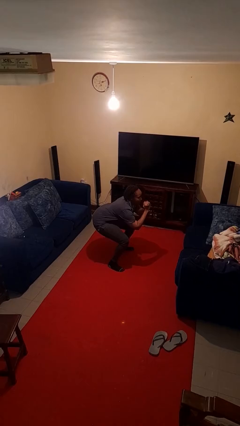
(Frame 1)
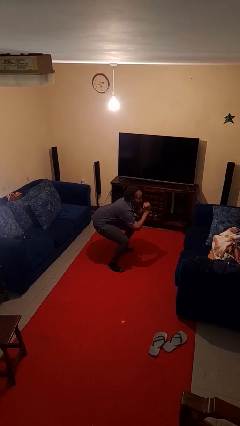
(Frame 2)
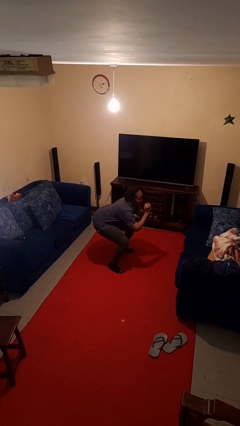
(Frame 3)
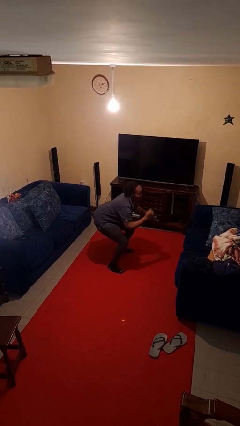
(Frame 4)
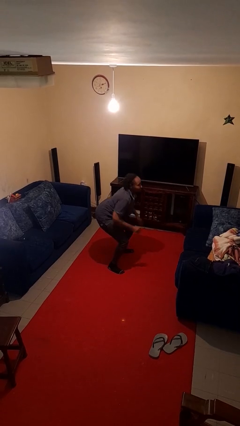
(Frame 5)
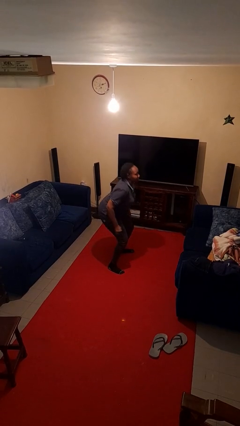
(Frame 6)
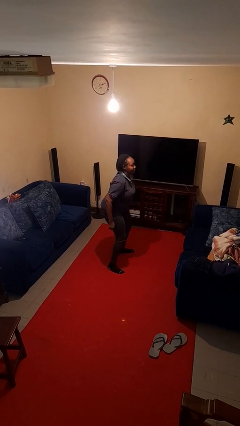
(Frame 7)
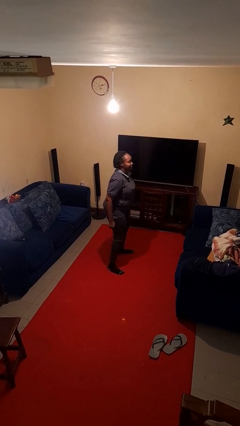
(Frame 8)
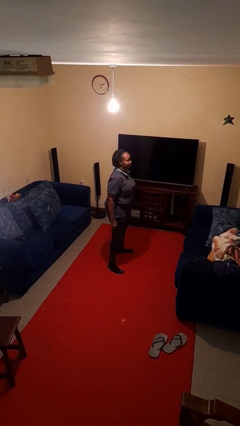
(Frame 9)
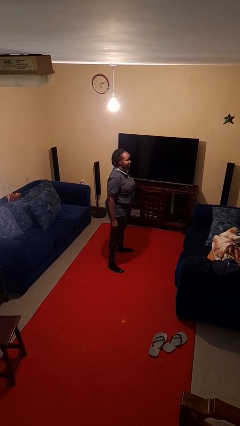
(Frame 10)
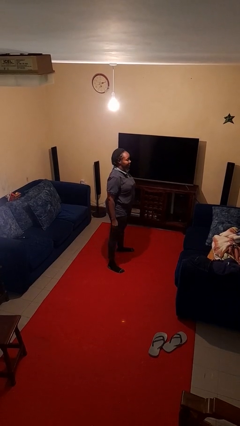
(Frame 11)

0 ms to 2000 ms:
person stands up

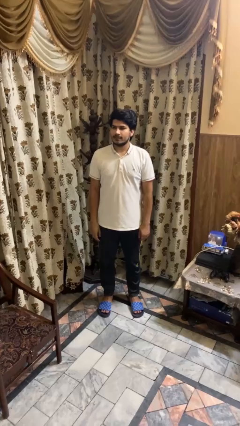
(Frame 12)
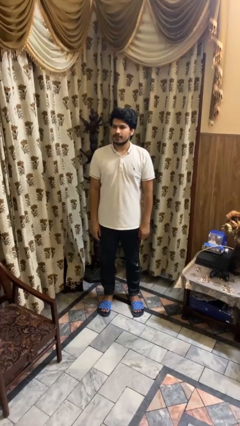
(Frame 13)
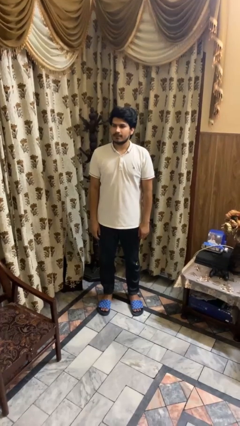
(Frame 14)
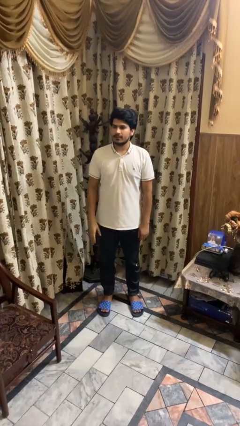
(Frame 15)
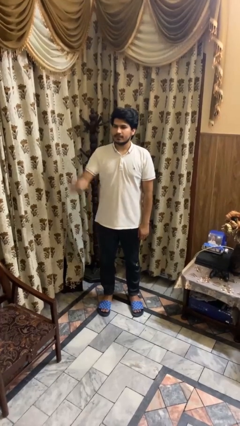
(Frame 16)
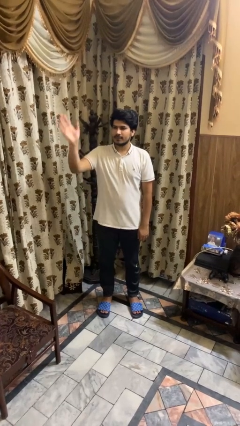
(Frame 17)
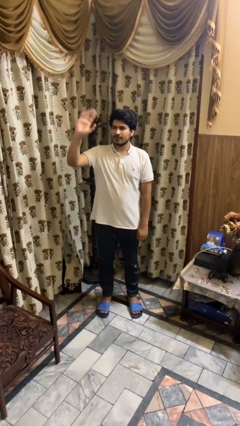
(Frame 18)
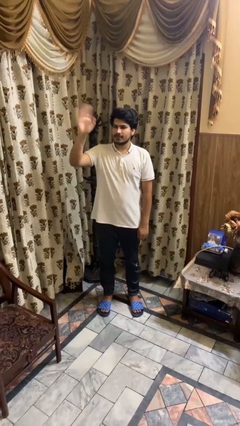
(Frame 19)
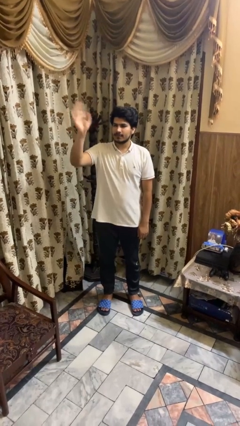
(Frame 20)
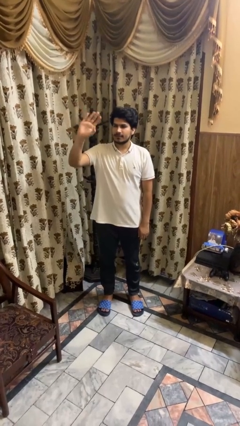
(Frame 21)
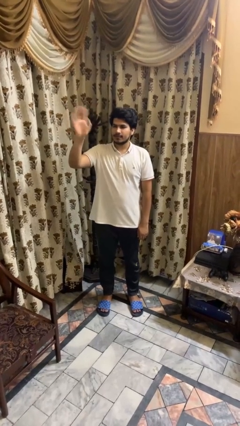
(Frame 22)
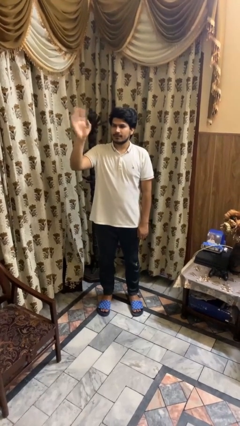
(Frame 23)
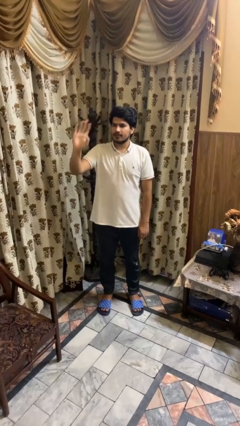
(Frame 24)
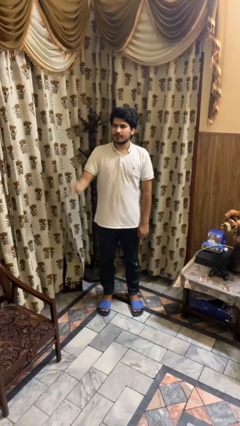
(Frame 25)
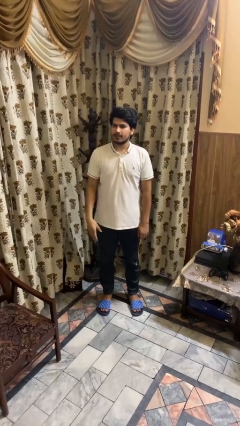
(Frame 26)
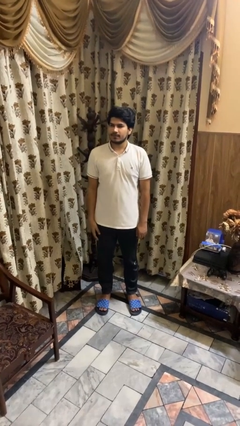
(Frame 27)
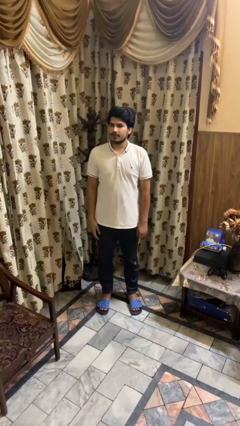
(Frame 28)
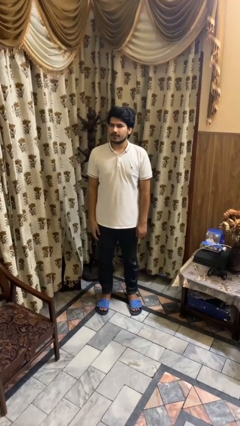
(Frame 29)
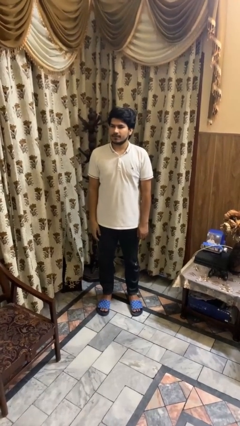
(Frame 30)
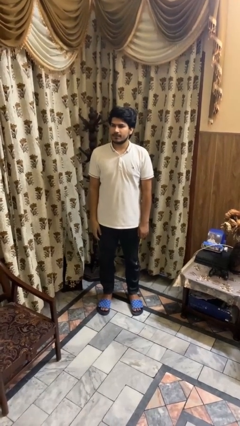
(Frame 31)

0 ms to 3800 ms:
person waves at person

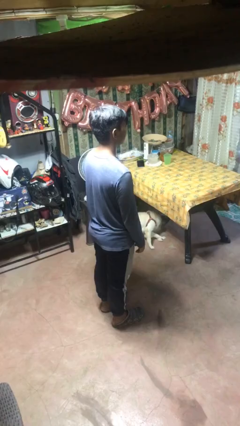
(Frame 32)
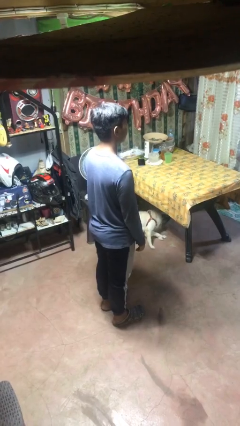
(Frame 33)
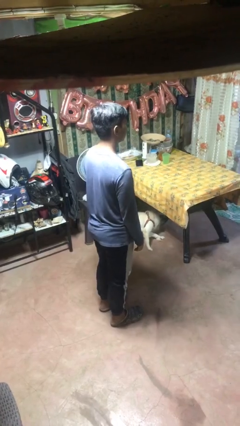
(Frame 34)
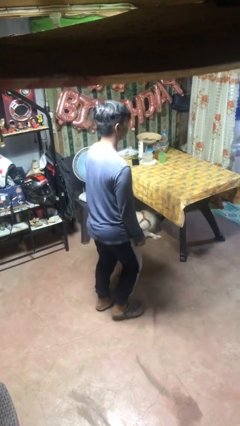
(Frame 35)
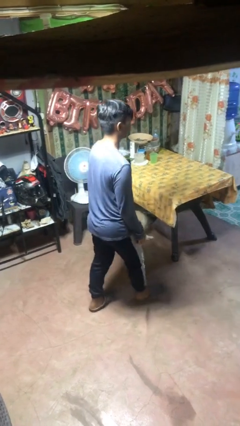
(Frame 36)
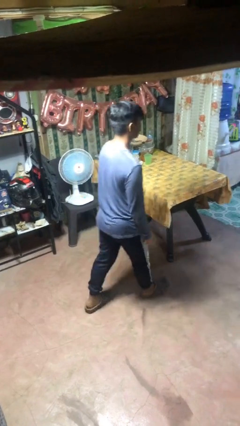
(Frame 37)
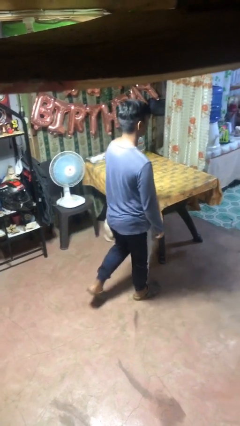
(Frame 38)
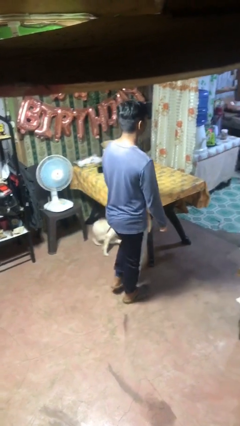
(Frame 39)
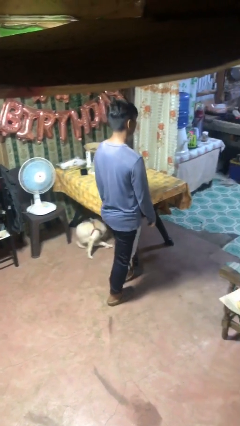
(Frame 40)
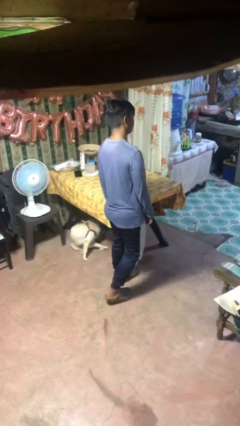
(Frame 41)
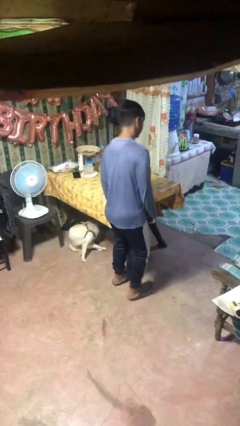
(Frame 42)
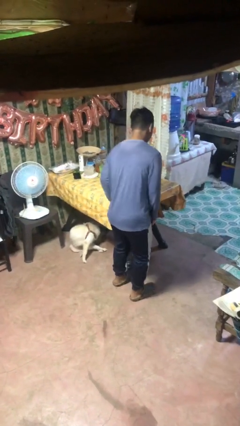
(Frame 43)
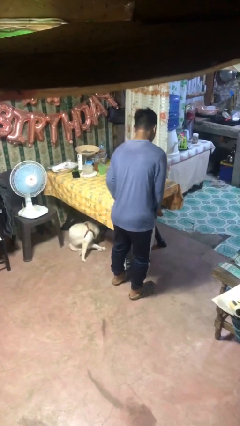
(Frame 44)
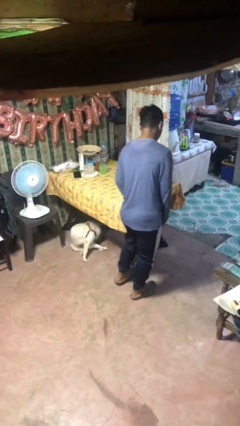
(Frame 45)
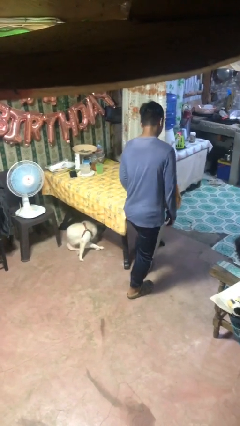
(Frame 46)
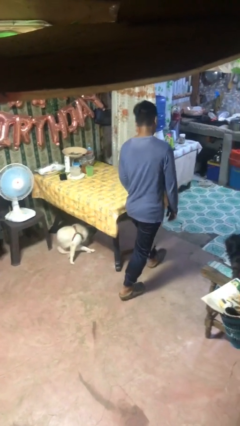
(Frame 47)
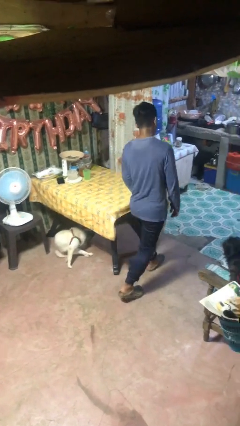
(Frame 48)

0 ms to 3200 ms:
person bumps into table

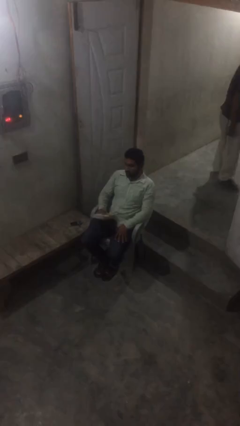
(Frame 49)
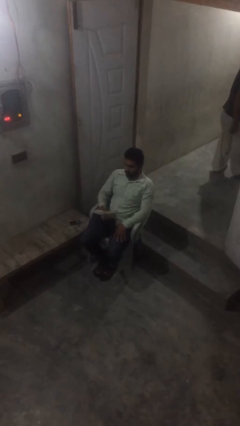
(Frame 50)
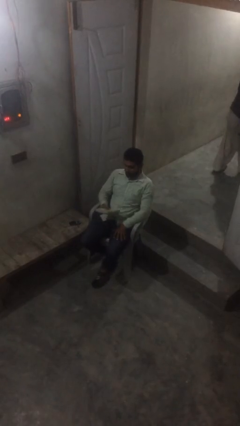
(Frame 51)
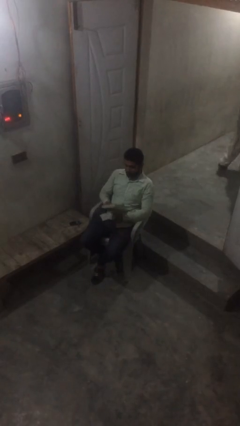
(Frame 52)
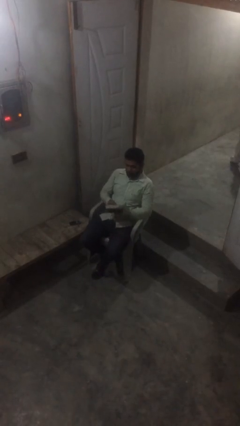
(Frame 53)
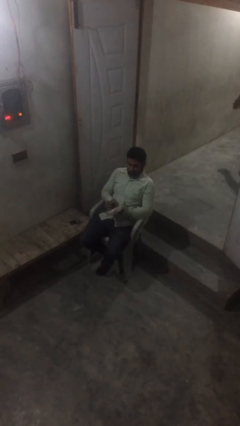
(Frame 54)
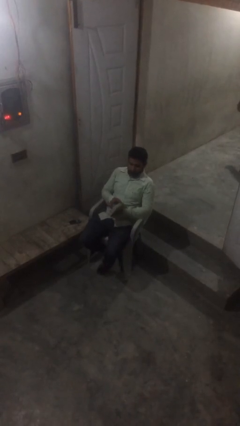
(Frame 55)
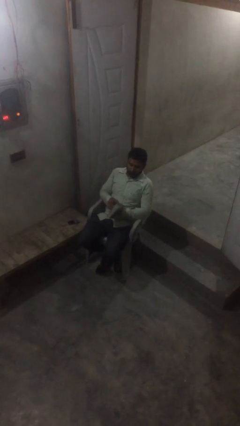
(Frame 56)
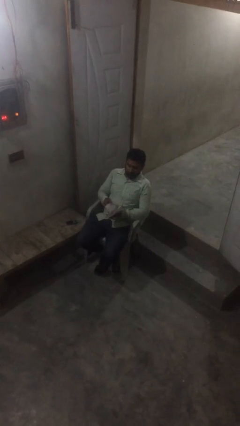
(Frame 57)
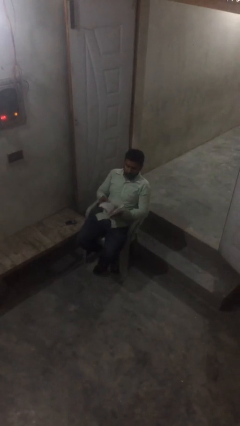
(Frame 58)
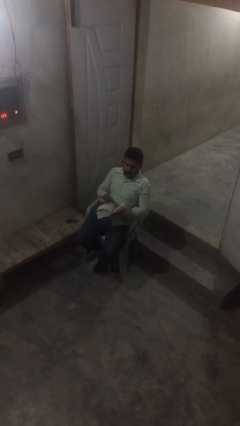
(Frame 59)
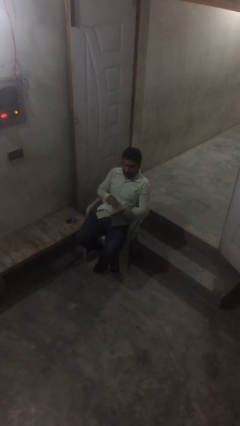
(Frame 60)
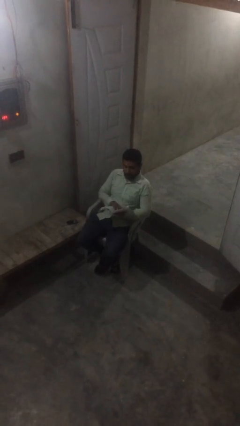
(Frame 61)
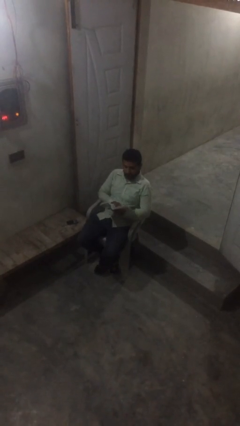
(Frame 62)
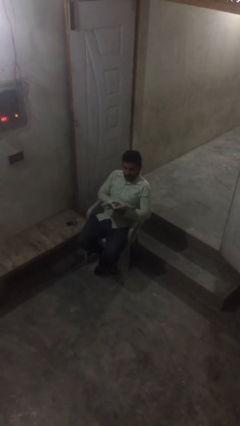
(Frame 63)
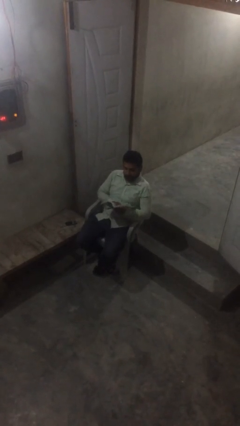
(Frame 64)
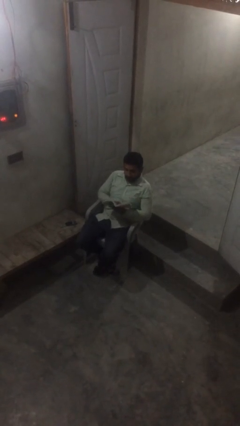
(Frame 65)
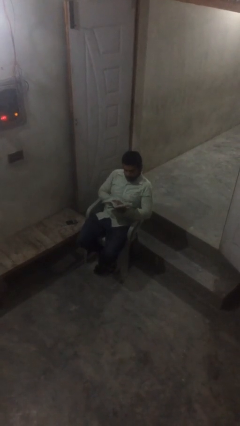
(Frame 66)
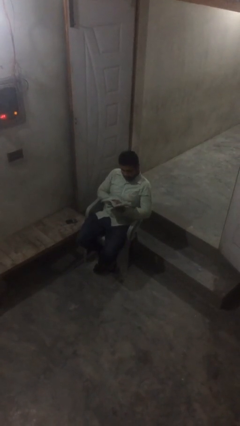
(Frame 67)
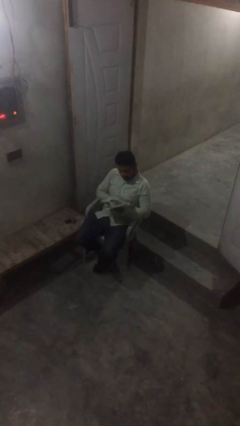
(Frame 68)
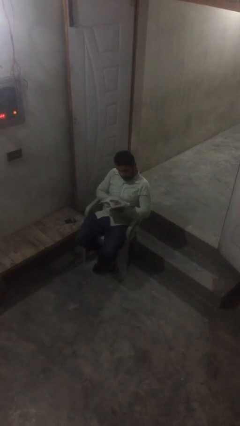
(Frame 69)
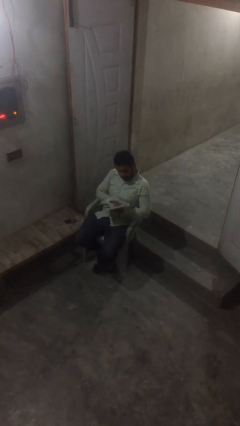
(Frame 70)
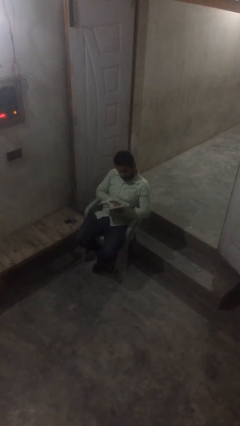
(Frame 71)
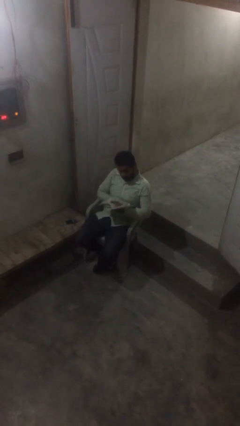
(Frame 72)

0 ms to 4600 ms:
person reads document

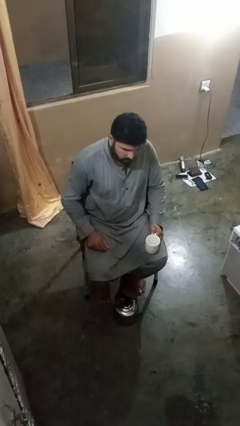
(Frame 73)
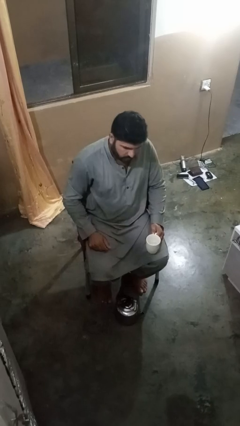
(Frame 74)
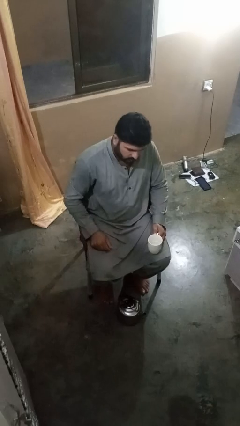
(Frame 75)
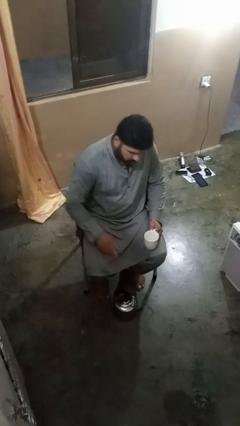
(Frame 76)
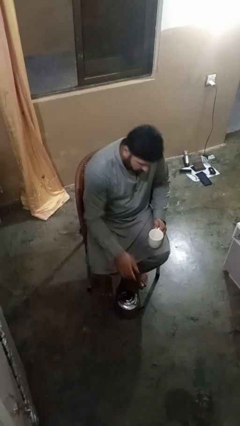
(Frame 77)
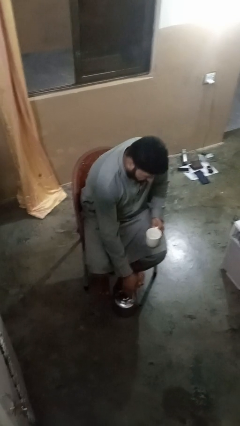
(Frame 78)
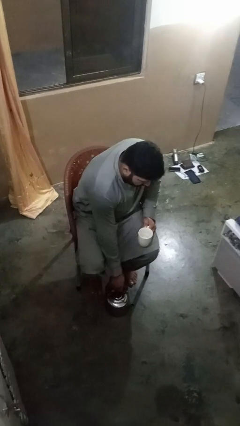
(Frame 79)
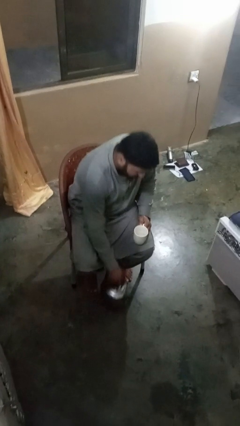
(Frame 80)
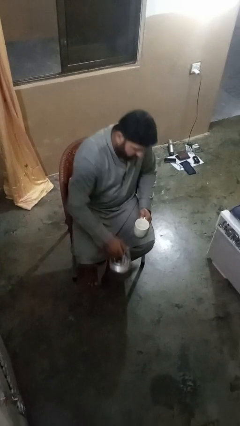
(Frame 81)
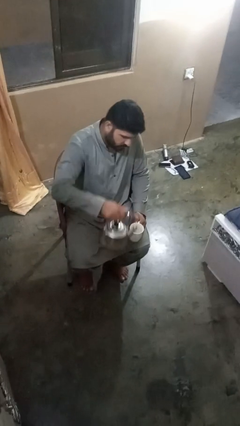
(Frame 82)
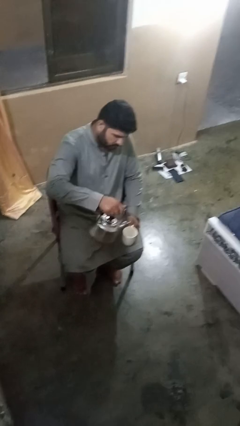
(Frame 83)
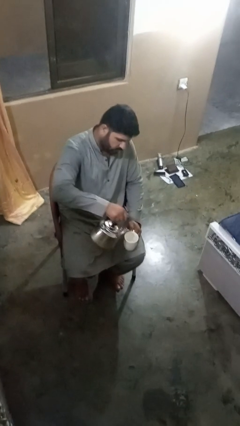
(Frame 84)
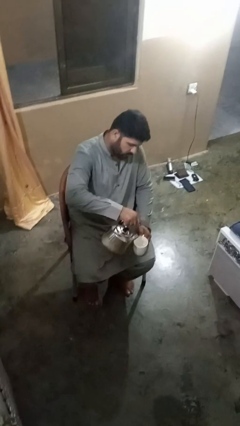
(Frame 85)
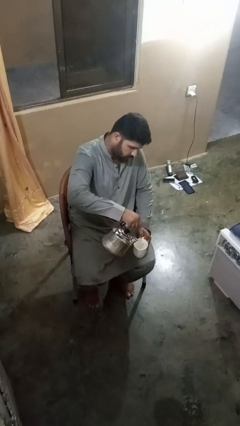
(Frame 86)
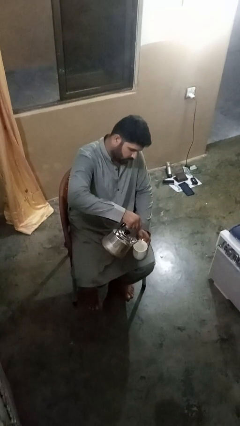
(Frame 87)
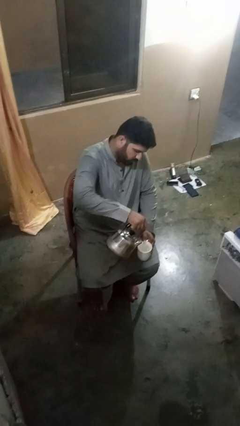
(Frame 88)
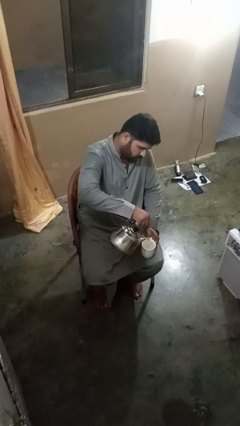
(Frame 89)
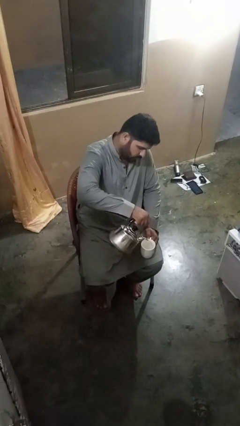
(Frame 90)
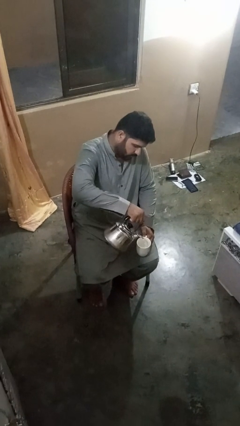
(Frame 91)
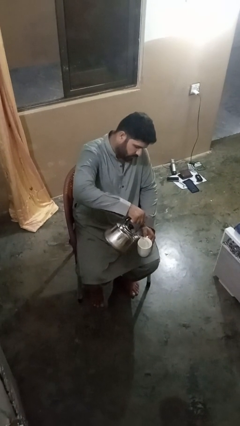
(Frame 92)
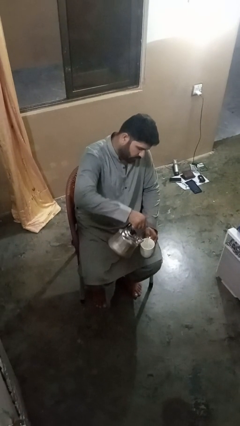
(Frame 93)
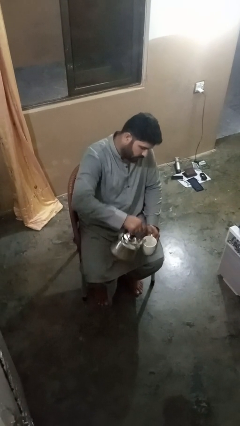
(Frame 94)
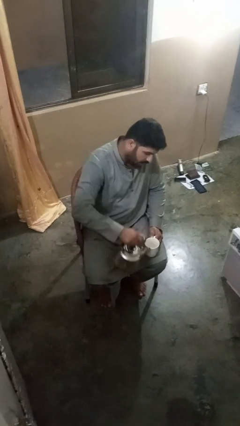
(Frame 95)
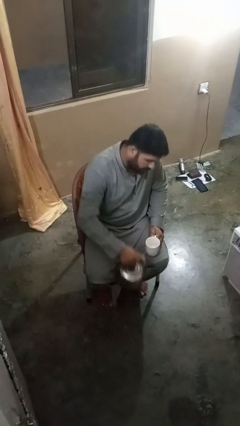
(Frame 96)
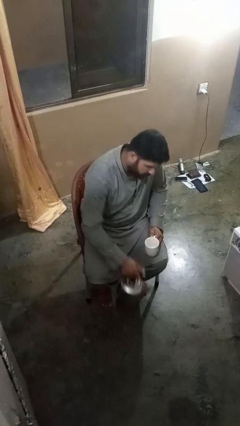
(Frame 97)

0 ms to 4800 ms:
person pours coffee into mug
